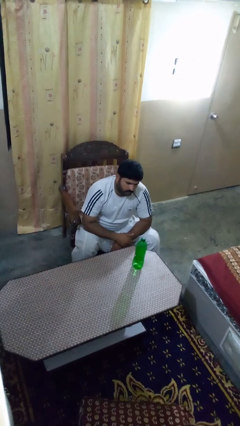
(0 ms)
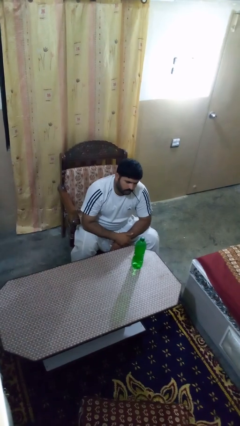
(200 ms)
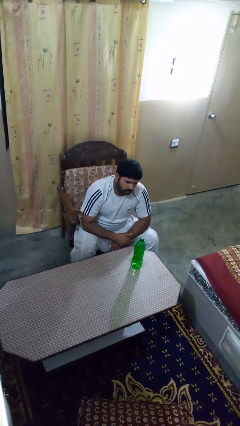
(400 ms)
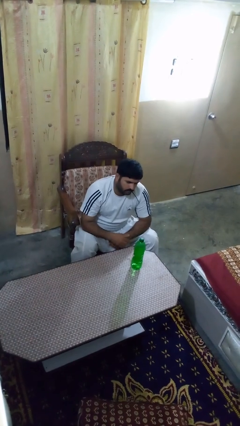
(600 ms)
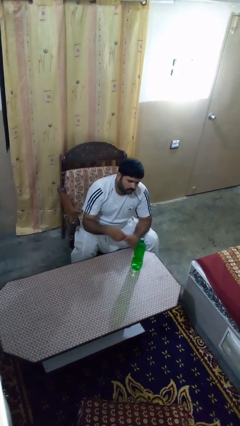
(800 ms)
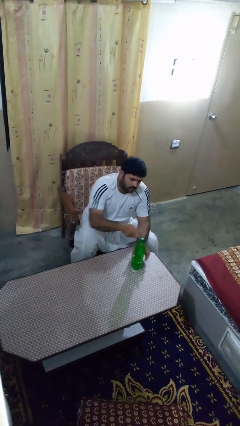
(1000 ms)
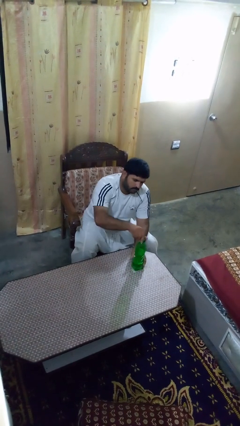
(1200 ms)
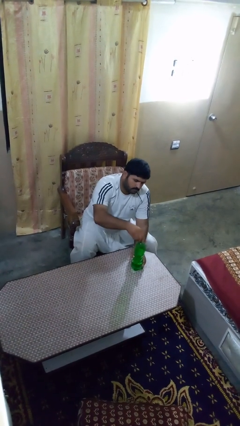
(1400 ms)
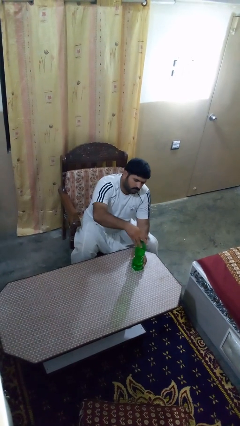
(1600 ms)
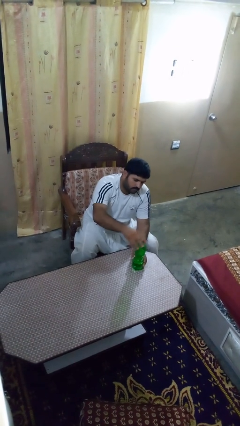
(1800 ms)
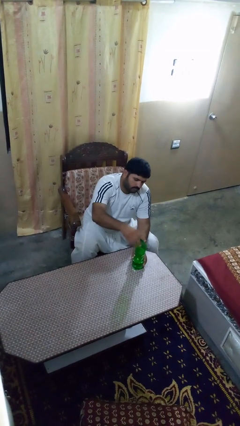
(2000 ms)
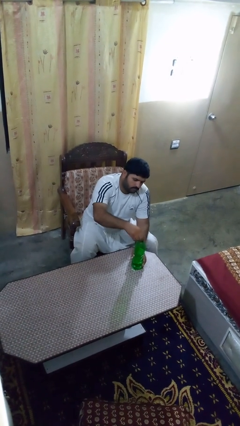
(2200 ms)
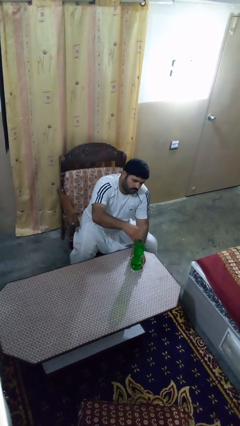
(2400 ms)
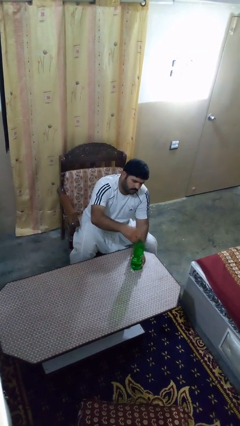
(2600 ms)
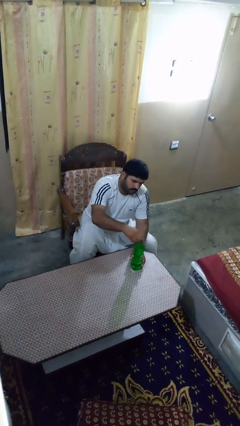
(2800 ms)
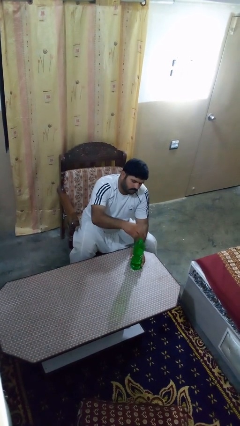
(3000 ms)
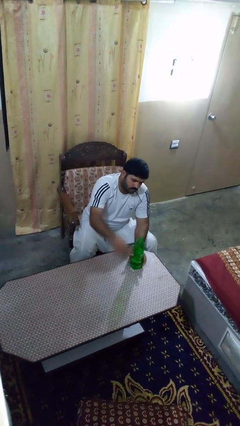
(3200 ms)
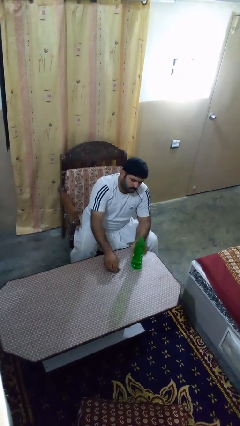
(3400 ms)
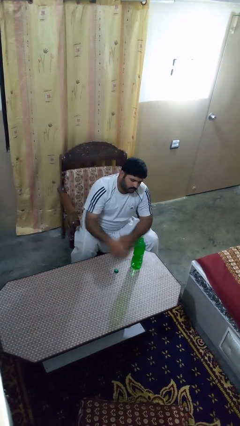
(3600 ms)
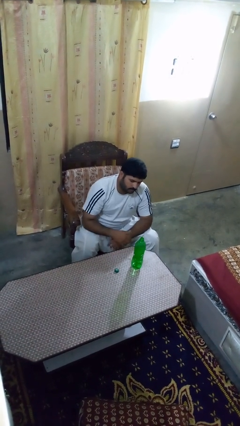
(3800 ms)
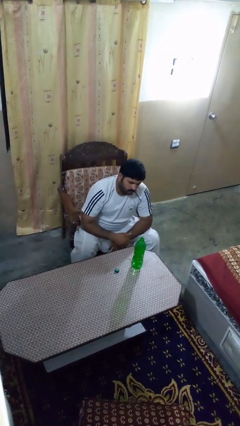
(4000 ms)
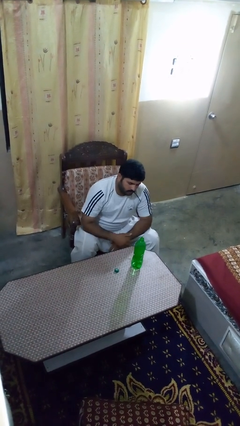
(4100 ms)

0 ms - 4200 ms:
person unscrews lid from bottle

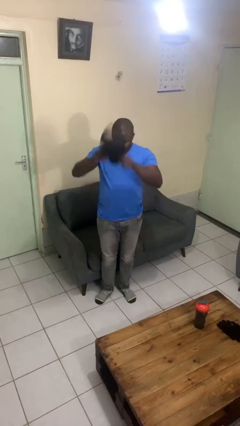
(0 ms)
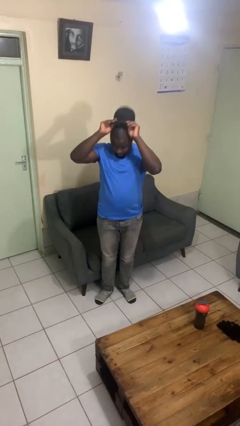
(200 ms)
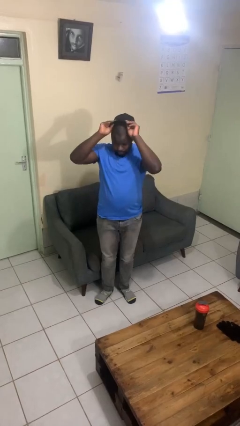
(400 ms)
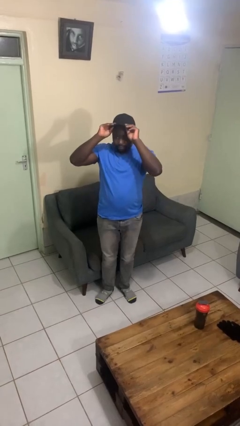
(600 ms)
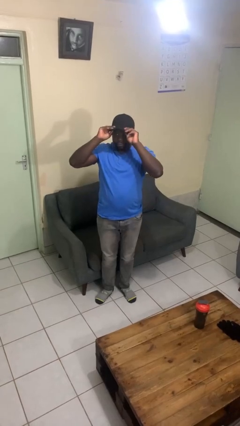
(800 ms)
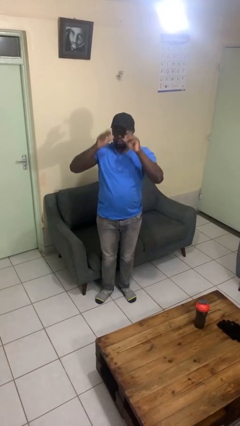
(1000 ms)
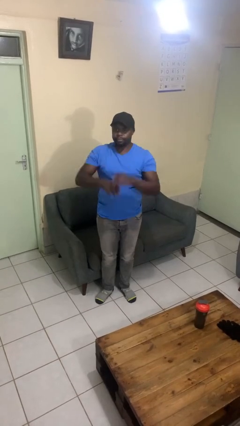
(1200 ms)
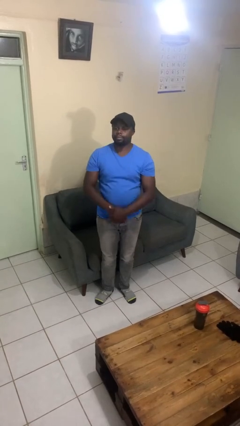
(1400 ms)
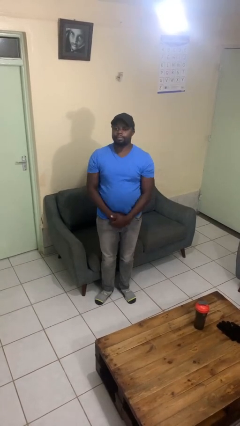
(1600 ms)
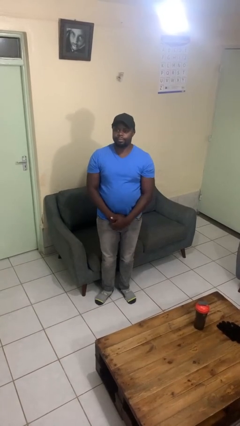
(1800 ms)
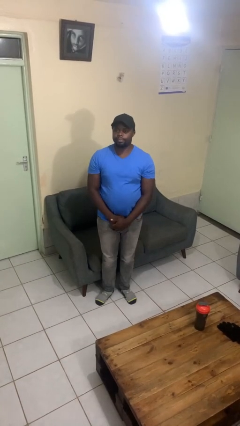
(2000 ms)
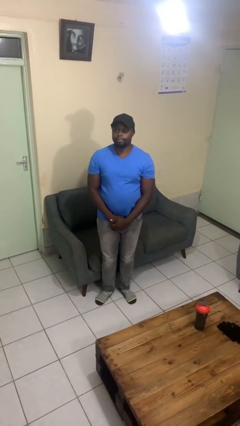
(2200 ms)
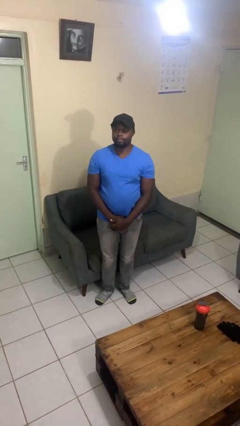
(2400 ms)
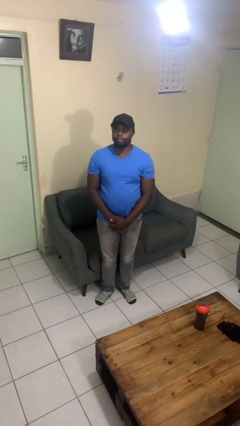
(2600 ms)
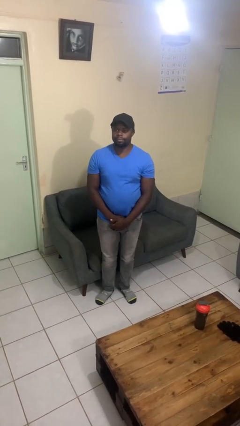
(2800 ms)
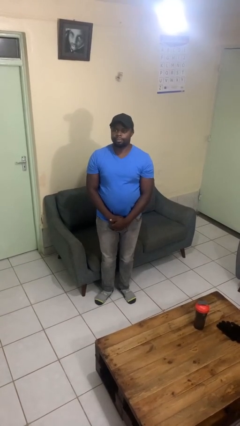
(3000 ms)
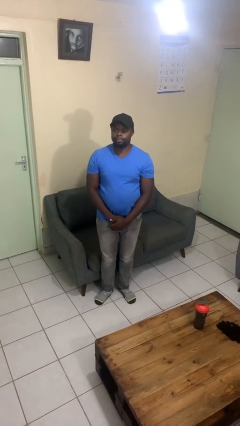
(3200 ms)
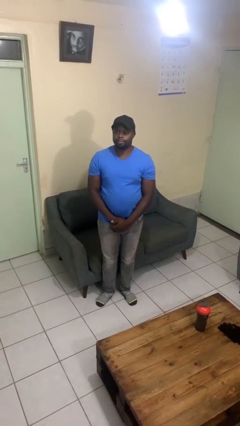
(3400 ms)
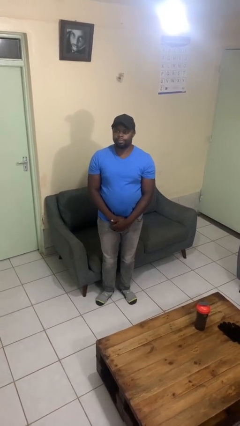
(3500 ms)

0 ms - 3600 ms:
person puts on hat

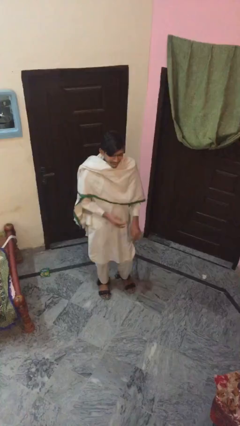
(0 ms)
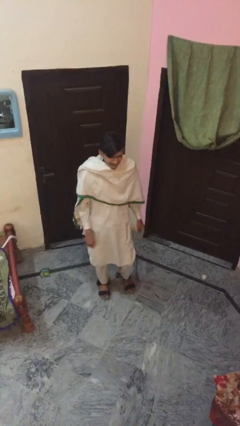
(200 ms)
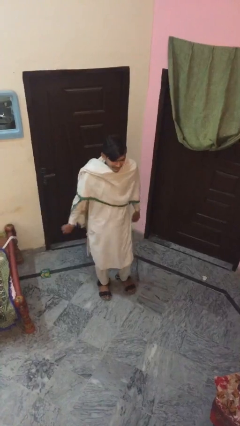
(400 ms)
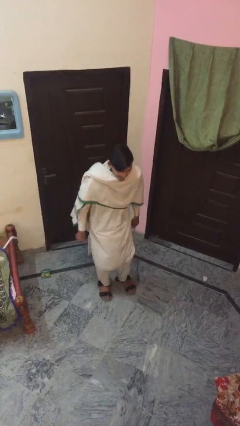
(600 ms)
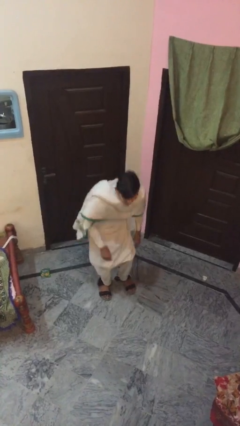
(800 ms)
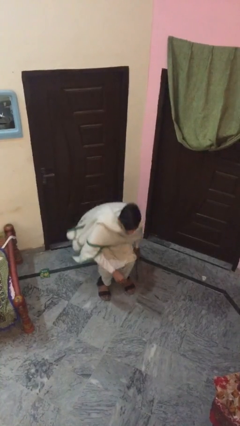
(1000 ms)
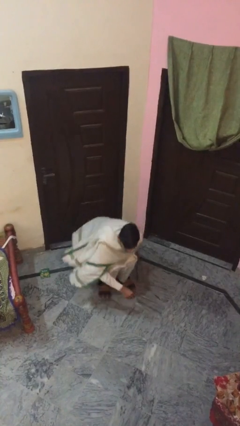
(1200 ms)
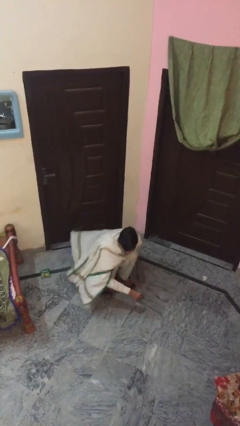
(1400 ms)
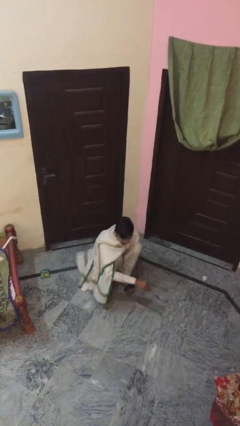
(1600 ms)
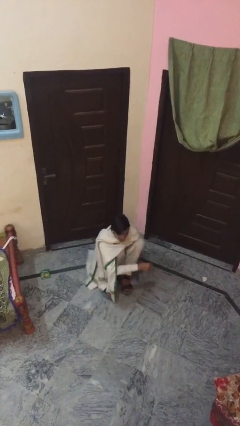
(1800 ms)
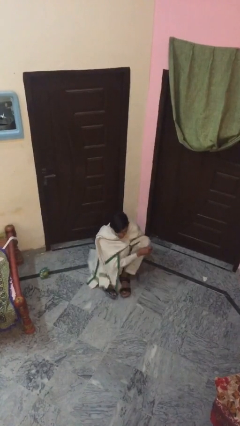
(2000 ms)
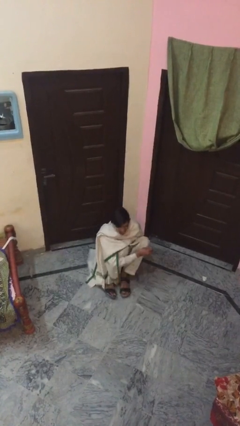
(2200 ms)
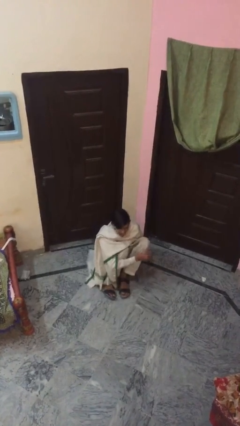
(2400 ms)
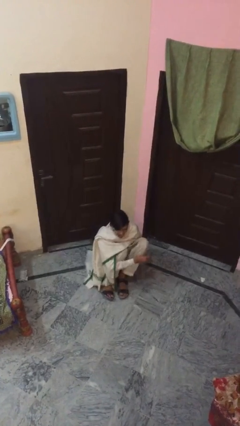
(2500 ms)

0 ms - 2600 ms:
person sits down

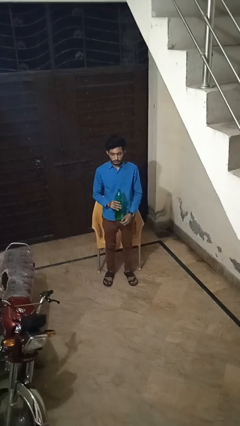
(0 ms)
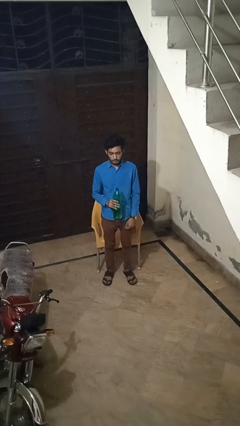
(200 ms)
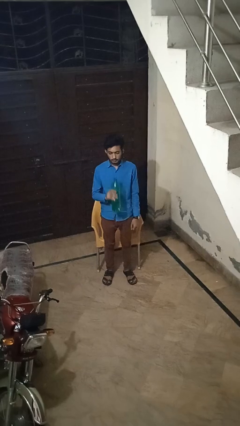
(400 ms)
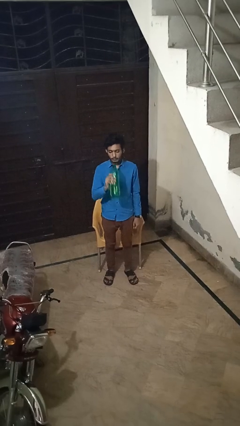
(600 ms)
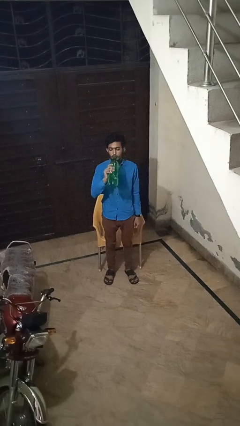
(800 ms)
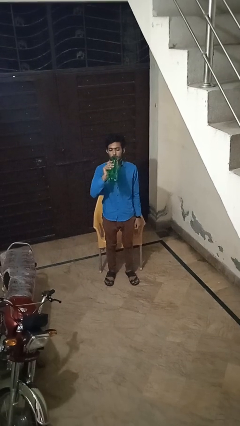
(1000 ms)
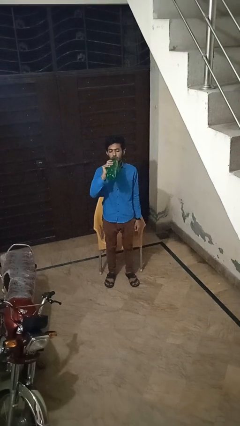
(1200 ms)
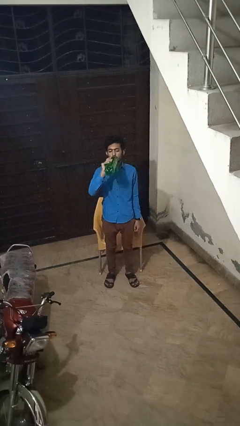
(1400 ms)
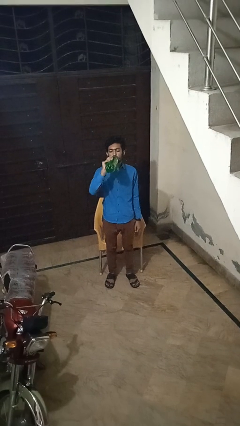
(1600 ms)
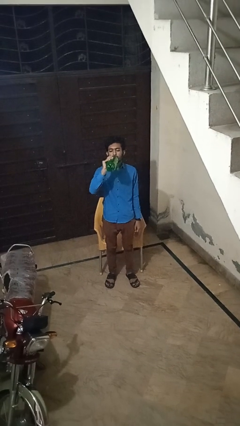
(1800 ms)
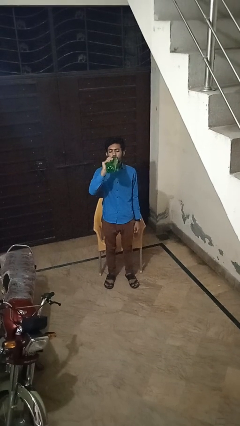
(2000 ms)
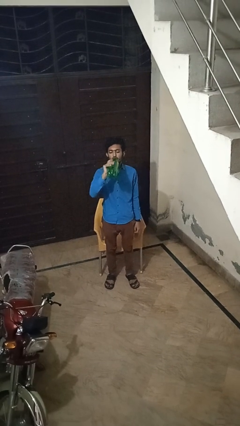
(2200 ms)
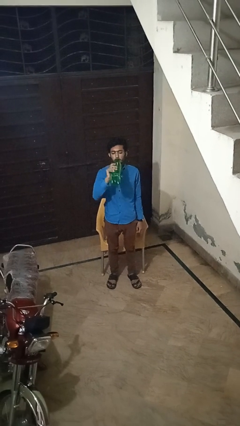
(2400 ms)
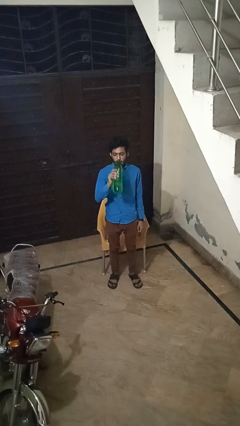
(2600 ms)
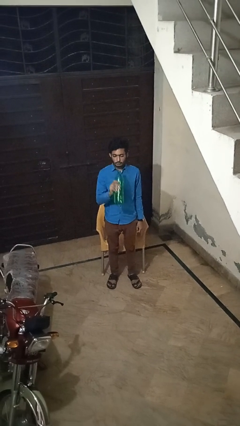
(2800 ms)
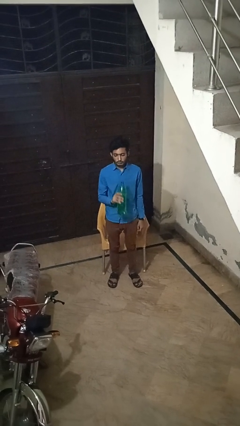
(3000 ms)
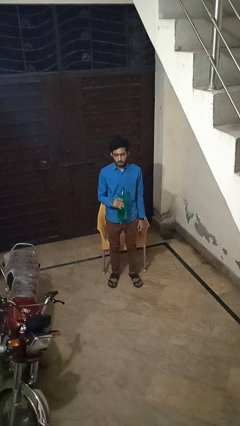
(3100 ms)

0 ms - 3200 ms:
person drinks from bottle

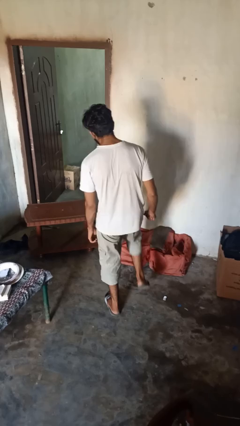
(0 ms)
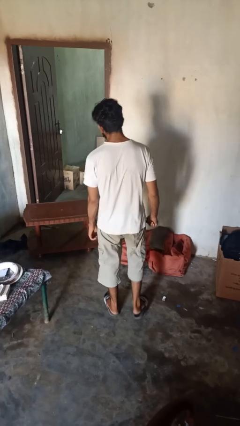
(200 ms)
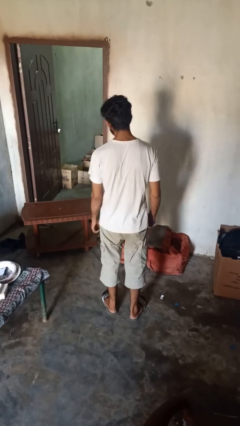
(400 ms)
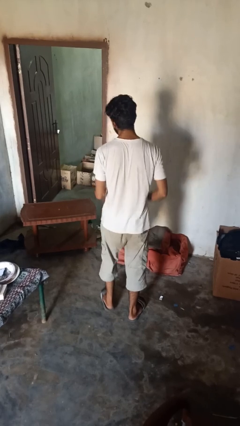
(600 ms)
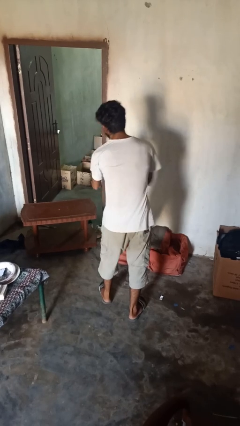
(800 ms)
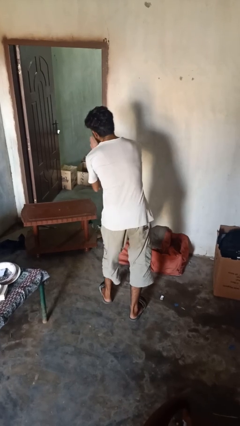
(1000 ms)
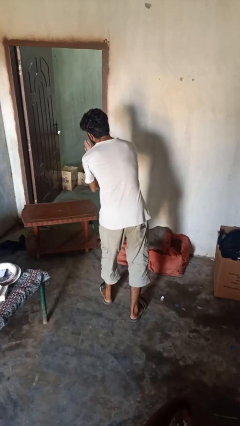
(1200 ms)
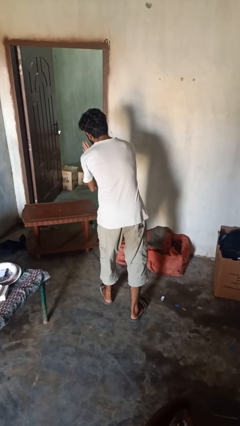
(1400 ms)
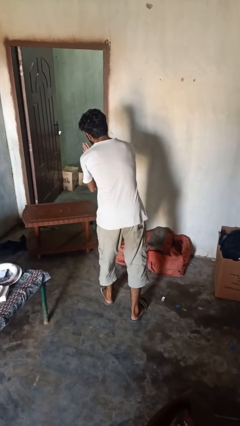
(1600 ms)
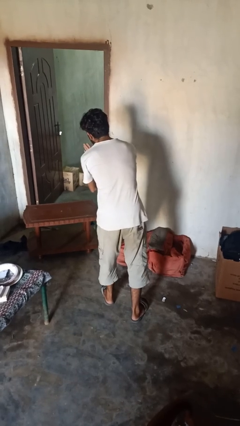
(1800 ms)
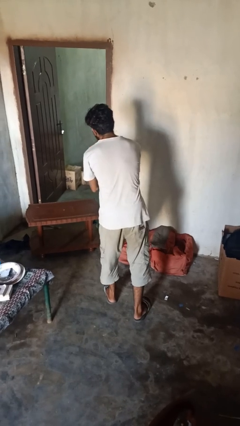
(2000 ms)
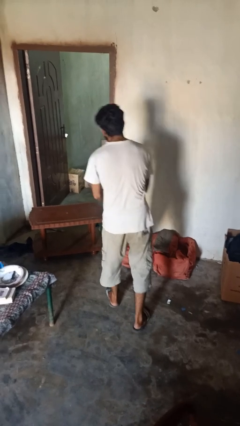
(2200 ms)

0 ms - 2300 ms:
person karate chop

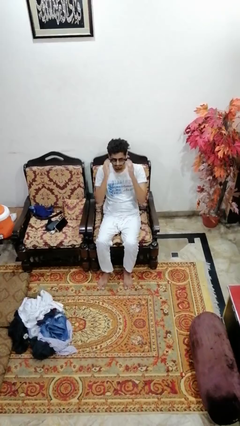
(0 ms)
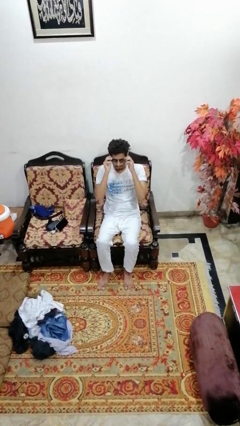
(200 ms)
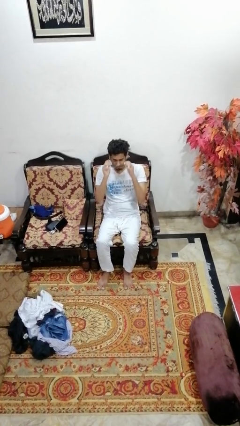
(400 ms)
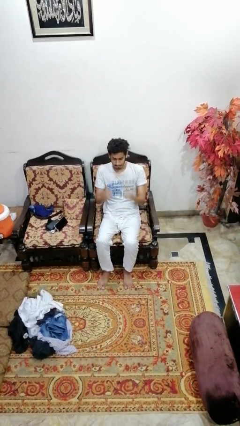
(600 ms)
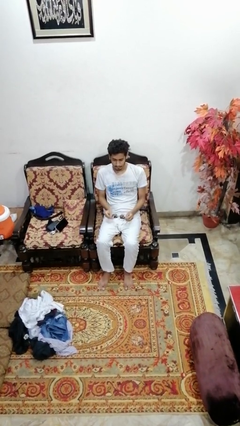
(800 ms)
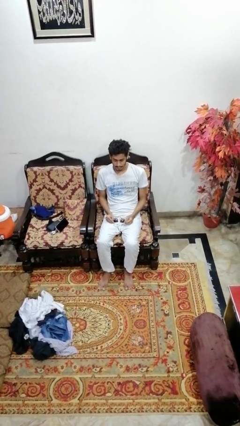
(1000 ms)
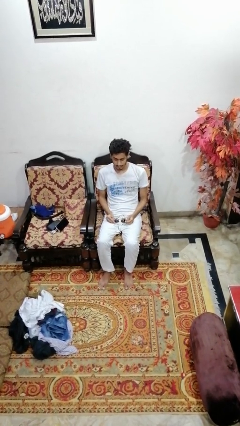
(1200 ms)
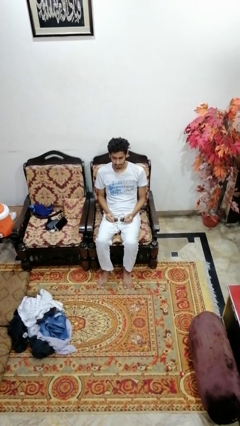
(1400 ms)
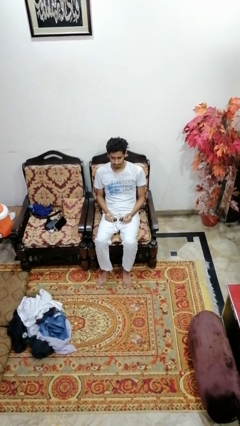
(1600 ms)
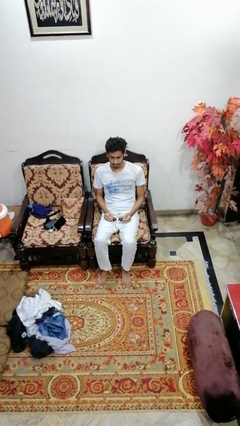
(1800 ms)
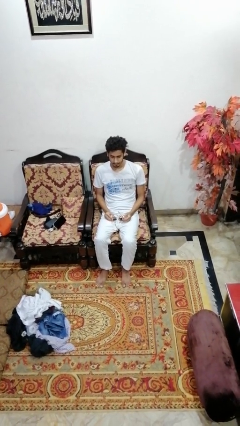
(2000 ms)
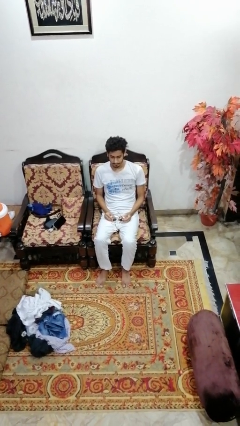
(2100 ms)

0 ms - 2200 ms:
person takes off sunglasses
